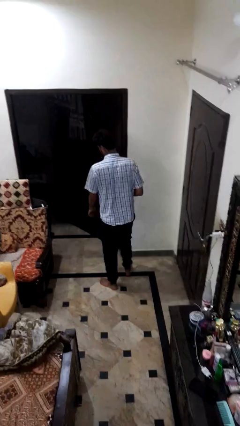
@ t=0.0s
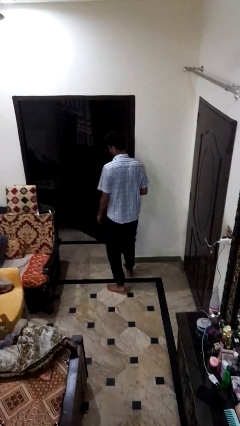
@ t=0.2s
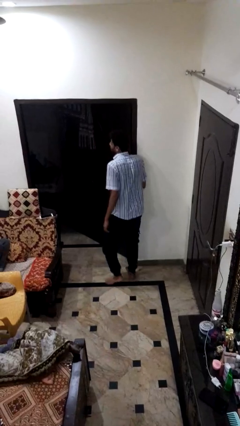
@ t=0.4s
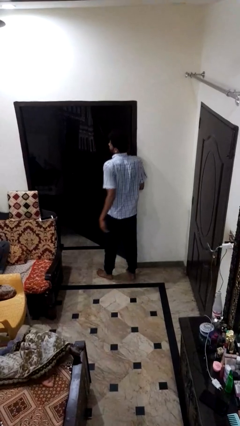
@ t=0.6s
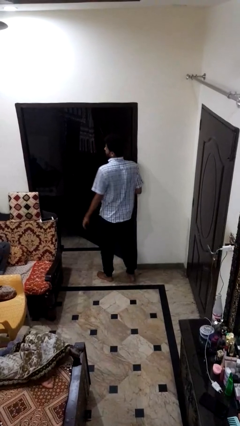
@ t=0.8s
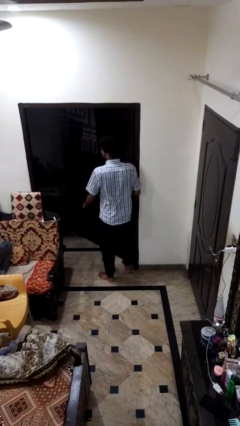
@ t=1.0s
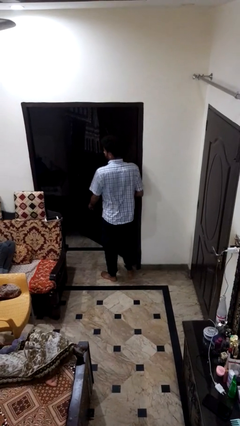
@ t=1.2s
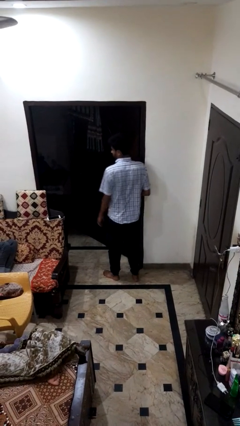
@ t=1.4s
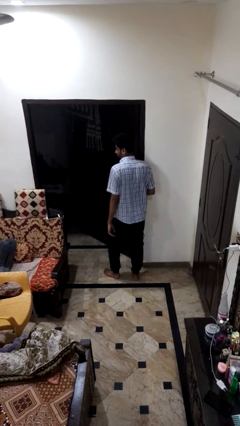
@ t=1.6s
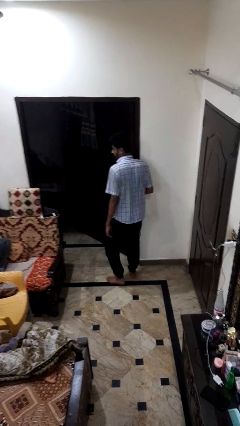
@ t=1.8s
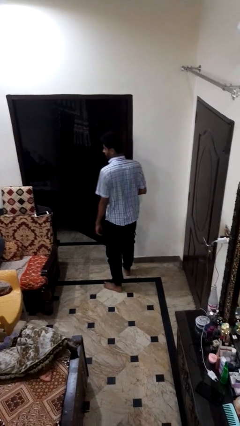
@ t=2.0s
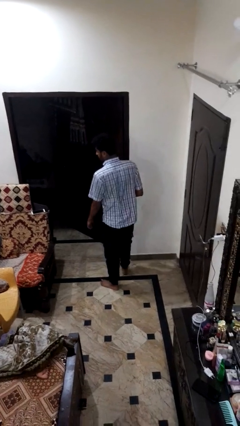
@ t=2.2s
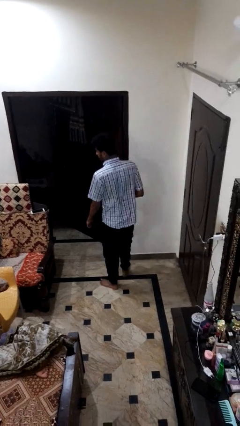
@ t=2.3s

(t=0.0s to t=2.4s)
person bumps into wall

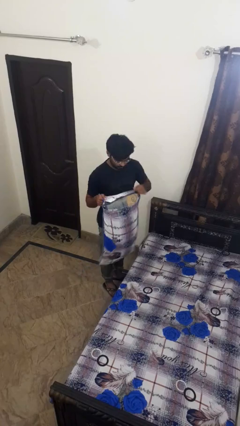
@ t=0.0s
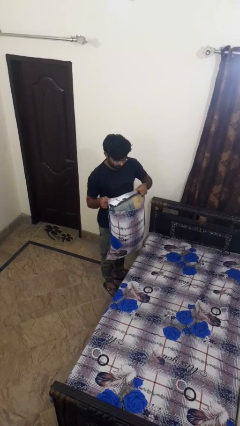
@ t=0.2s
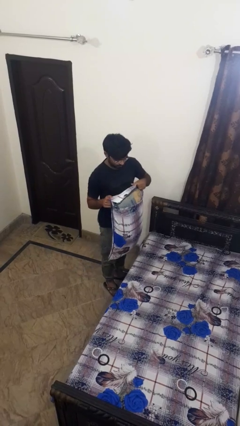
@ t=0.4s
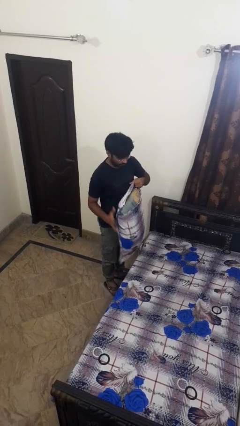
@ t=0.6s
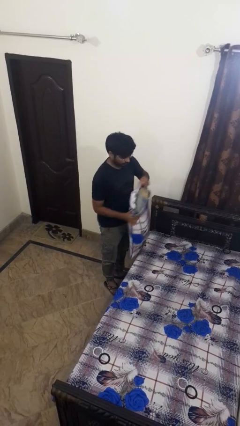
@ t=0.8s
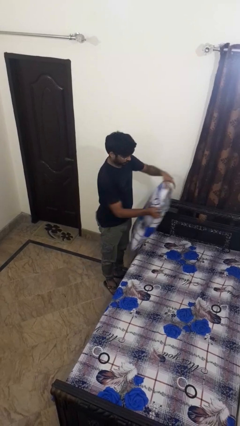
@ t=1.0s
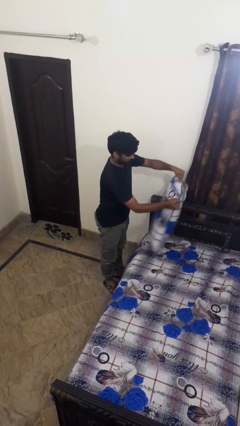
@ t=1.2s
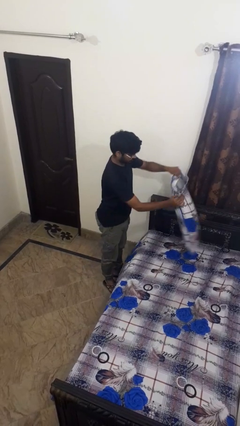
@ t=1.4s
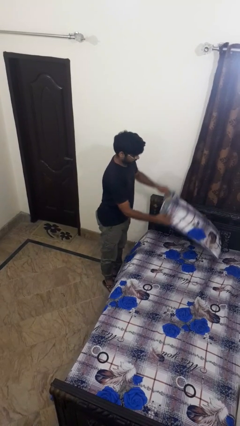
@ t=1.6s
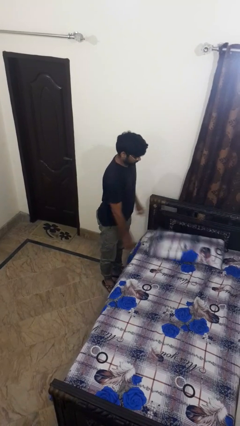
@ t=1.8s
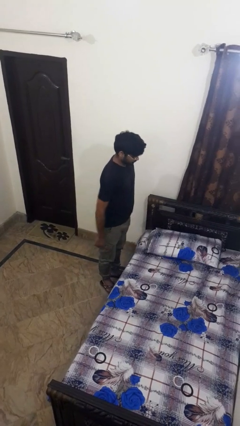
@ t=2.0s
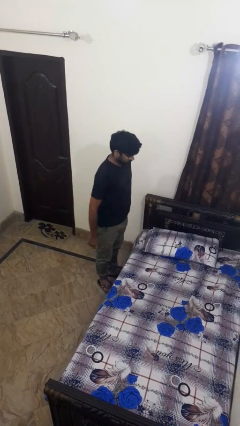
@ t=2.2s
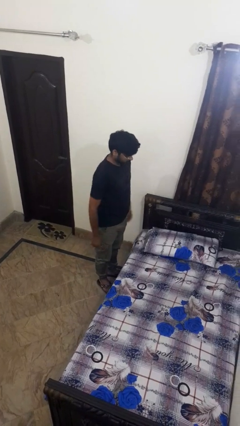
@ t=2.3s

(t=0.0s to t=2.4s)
person puts down object on bed

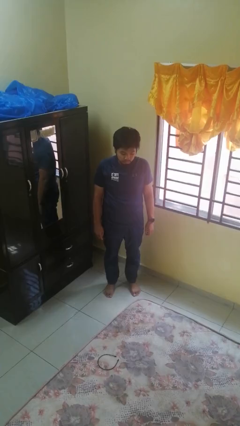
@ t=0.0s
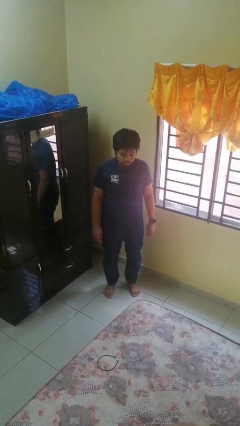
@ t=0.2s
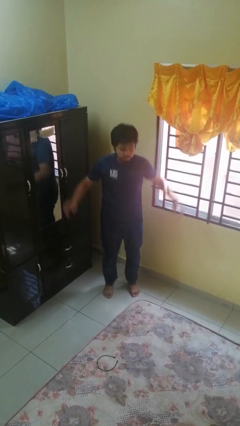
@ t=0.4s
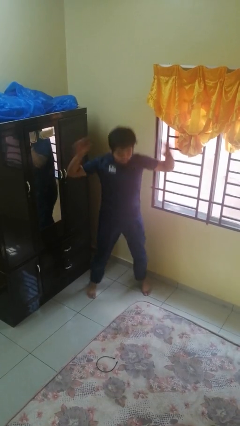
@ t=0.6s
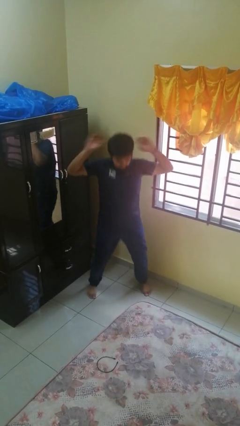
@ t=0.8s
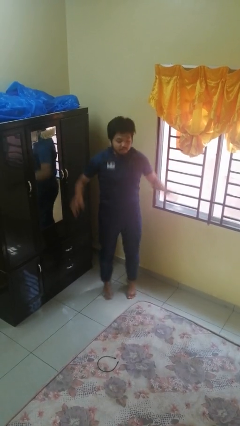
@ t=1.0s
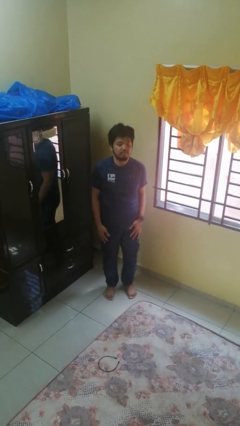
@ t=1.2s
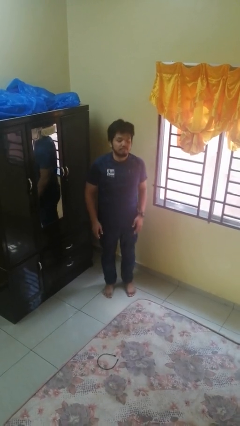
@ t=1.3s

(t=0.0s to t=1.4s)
person exercises with jumping jacks

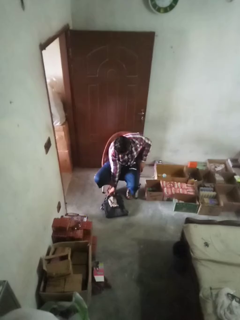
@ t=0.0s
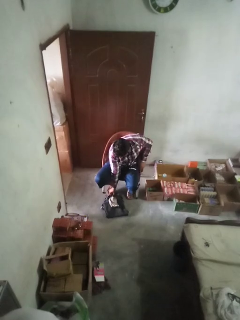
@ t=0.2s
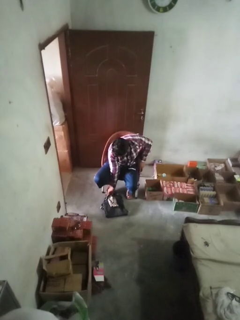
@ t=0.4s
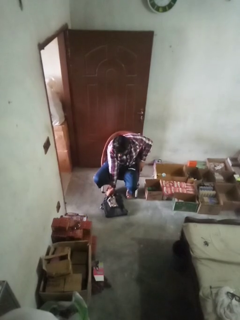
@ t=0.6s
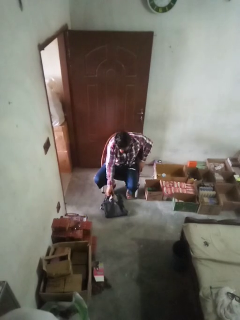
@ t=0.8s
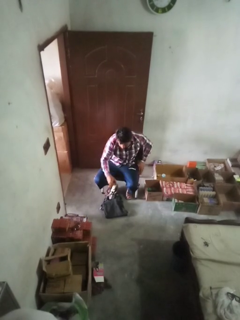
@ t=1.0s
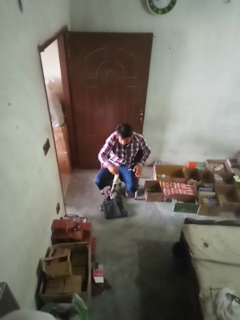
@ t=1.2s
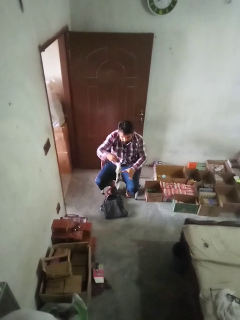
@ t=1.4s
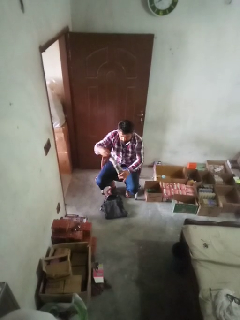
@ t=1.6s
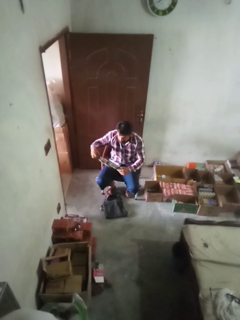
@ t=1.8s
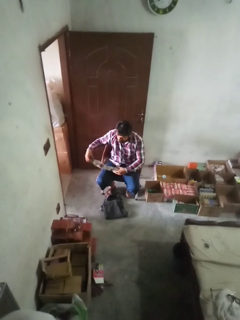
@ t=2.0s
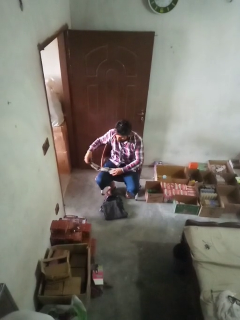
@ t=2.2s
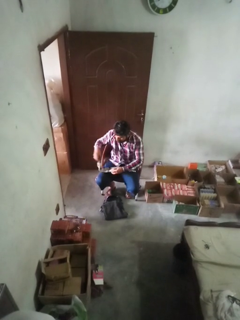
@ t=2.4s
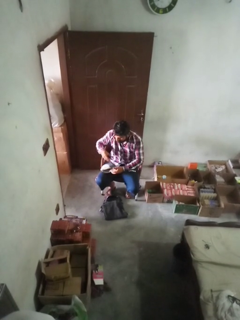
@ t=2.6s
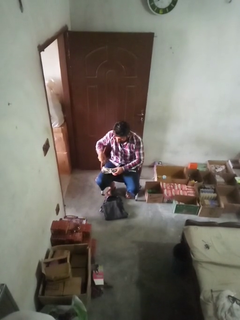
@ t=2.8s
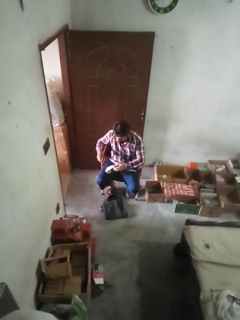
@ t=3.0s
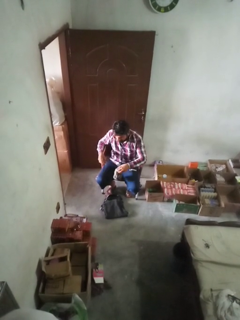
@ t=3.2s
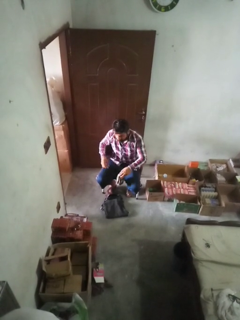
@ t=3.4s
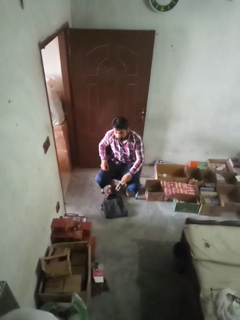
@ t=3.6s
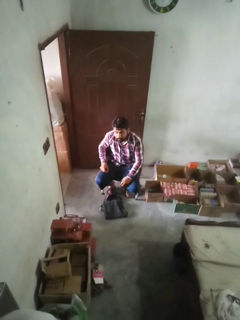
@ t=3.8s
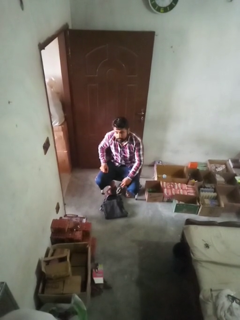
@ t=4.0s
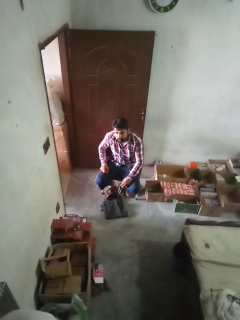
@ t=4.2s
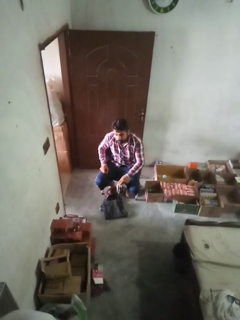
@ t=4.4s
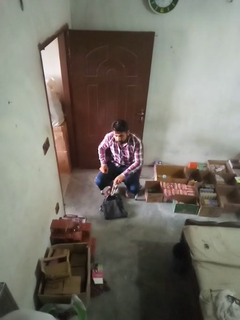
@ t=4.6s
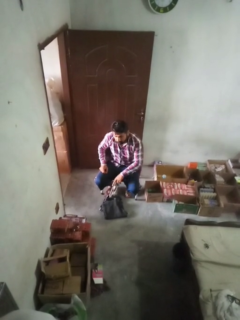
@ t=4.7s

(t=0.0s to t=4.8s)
person folds socks

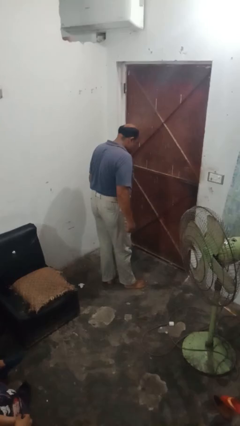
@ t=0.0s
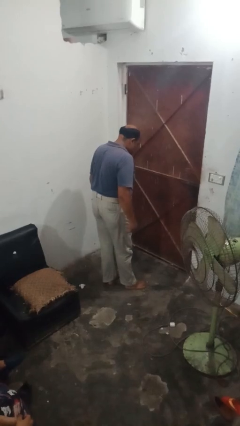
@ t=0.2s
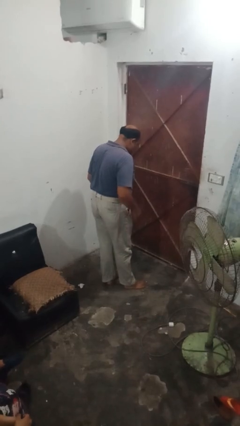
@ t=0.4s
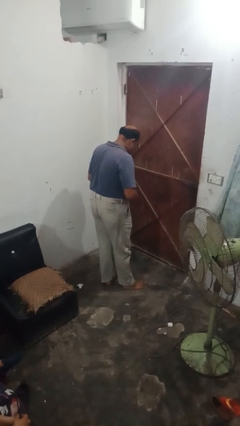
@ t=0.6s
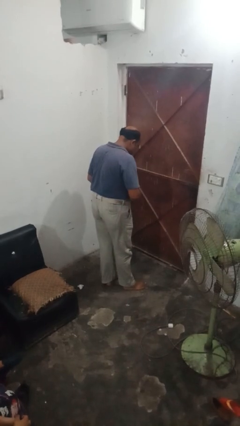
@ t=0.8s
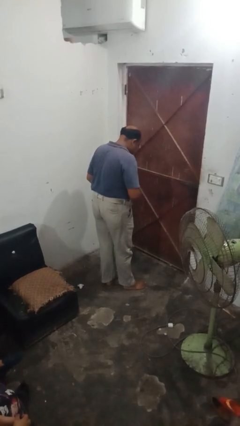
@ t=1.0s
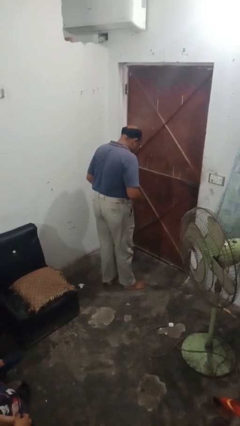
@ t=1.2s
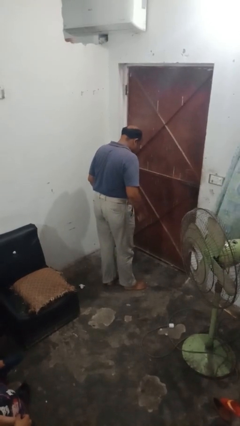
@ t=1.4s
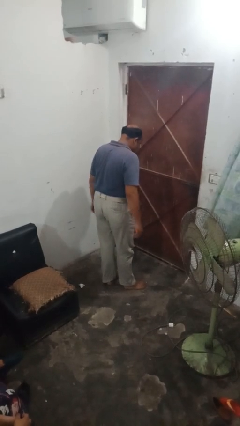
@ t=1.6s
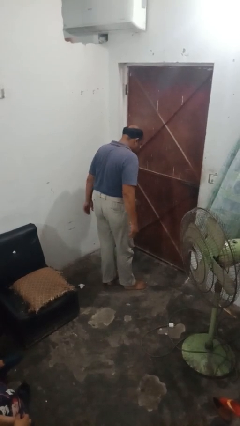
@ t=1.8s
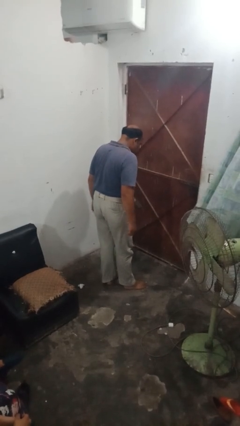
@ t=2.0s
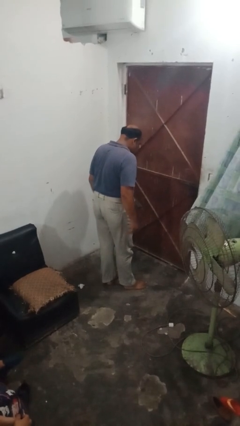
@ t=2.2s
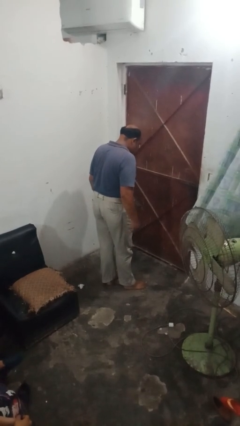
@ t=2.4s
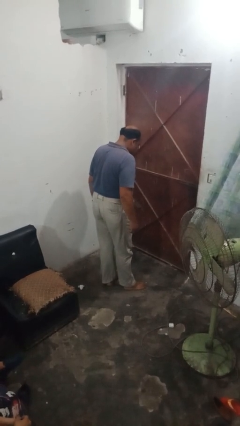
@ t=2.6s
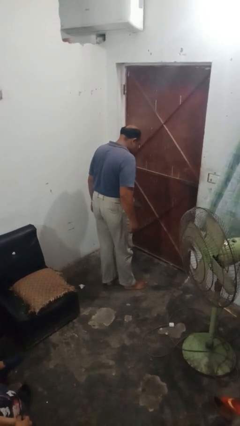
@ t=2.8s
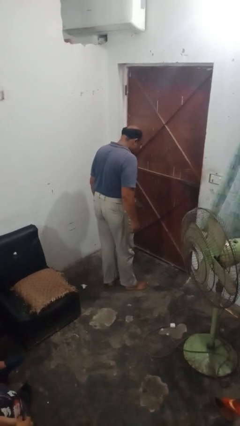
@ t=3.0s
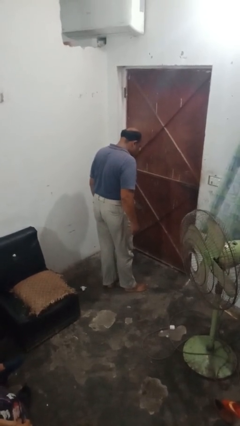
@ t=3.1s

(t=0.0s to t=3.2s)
person takes off belt

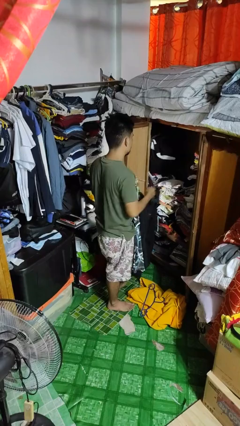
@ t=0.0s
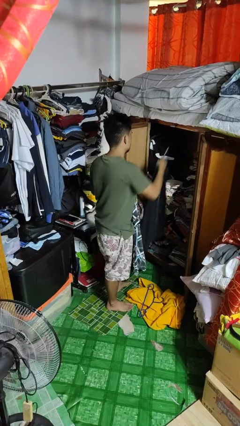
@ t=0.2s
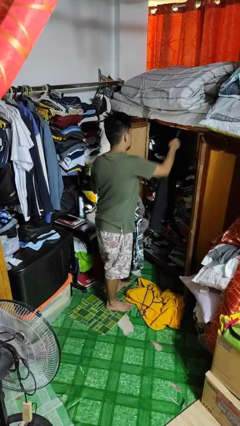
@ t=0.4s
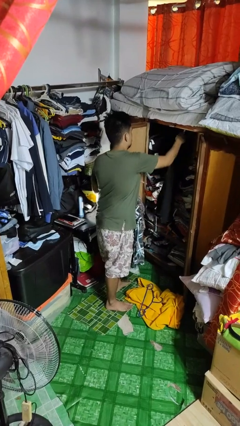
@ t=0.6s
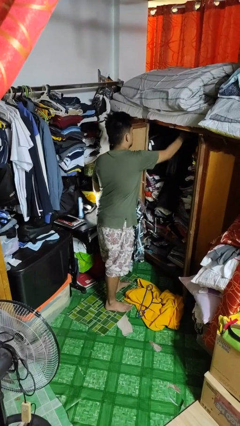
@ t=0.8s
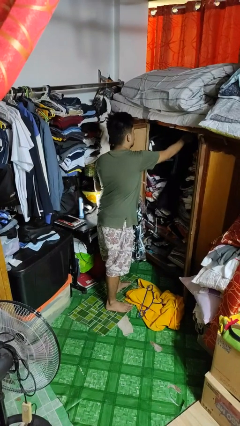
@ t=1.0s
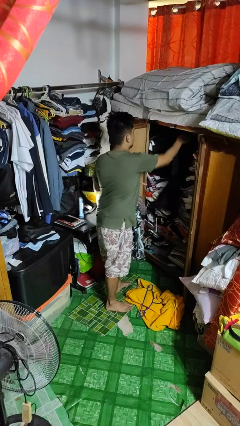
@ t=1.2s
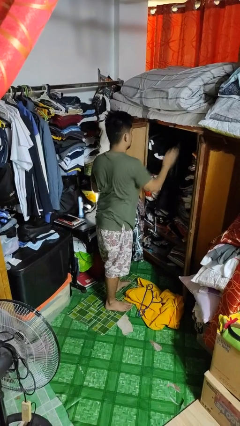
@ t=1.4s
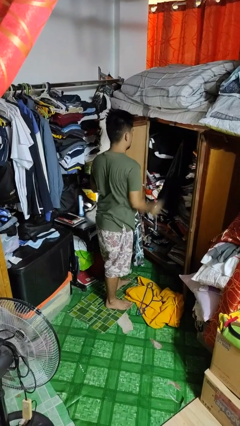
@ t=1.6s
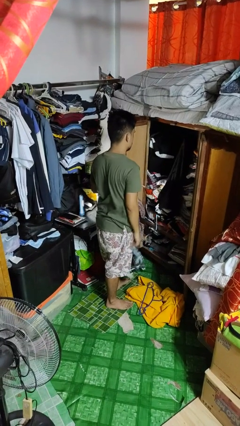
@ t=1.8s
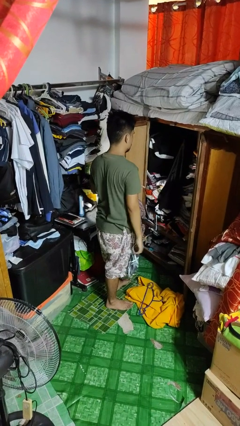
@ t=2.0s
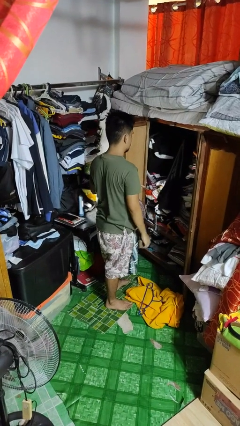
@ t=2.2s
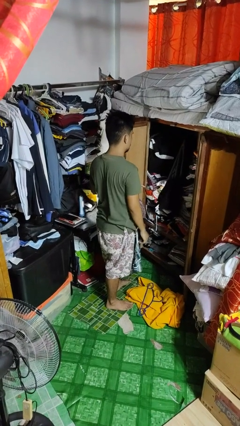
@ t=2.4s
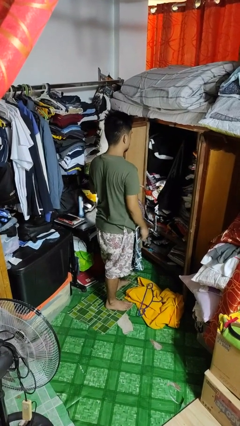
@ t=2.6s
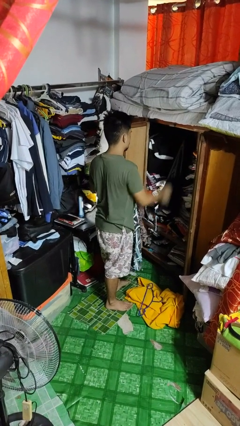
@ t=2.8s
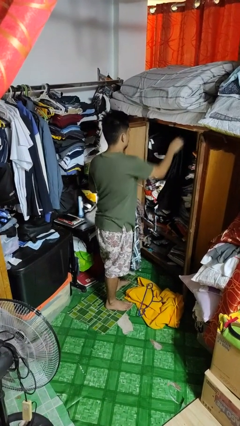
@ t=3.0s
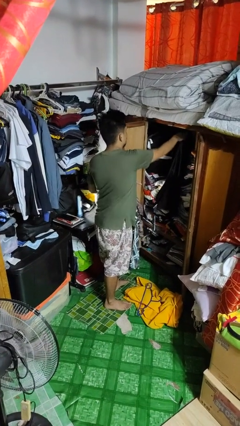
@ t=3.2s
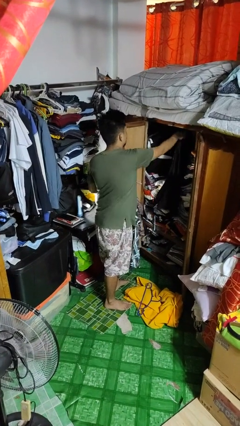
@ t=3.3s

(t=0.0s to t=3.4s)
person puts clothes into closet

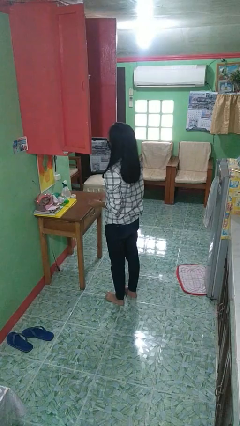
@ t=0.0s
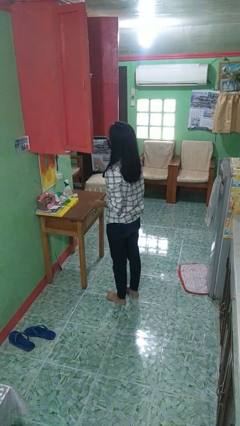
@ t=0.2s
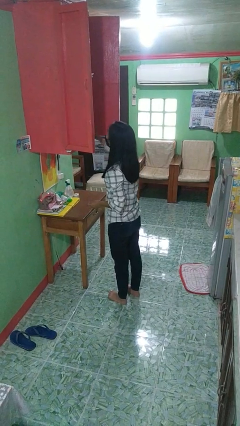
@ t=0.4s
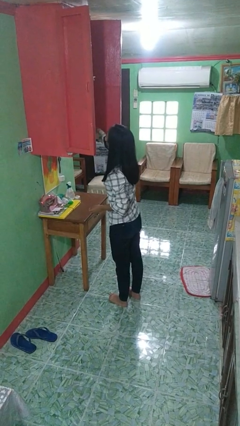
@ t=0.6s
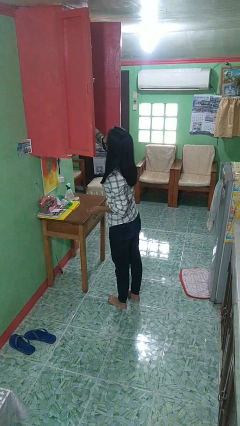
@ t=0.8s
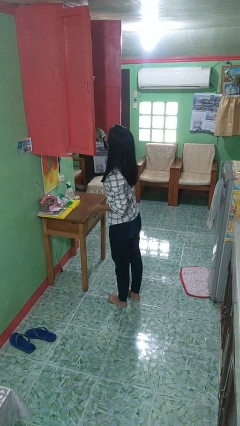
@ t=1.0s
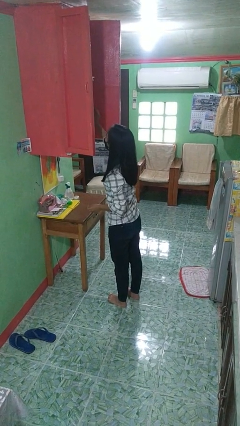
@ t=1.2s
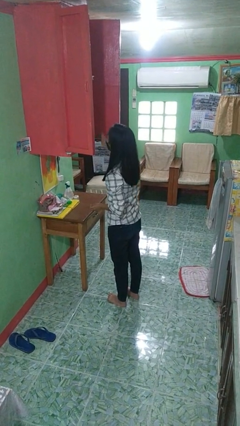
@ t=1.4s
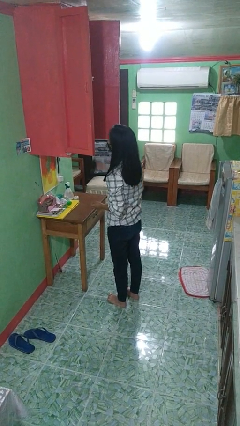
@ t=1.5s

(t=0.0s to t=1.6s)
person picks up object from cabinet
